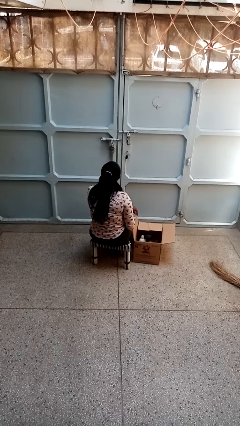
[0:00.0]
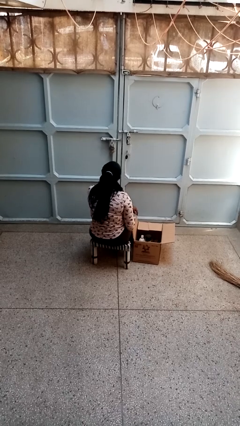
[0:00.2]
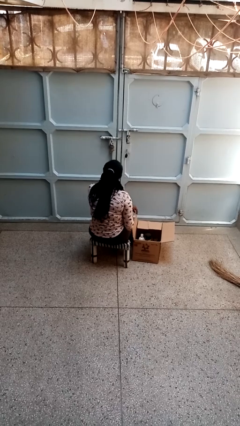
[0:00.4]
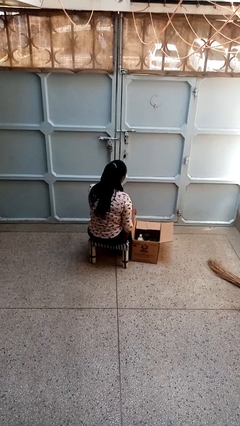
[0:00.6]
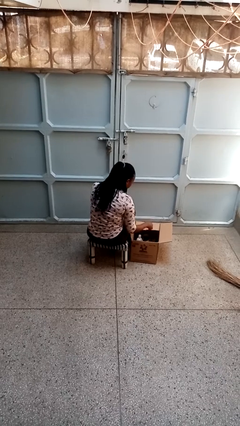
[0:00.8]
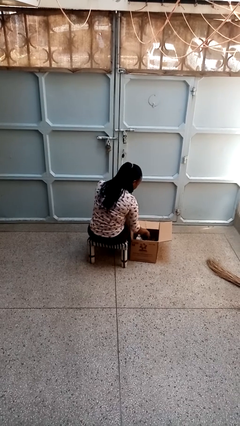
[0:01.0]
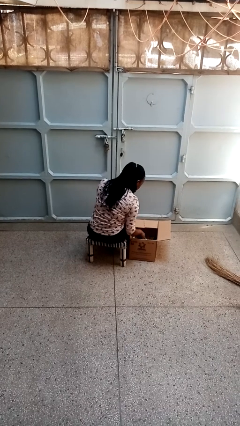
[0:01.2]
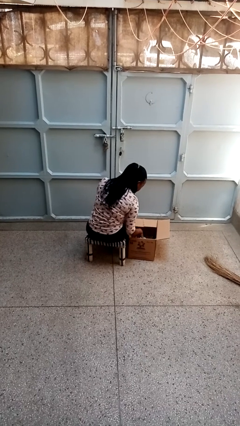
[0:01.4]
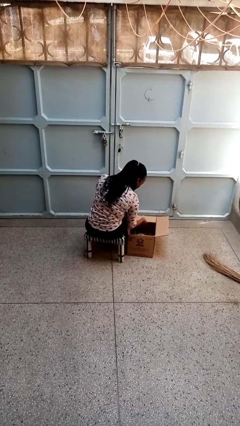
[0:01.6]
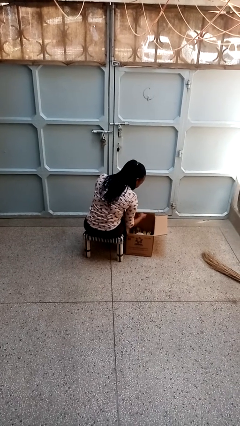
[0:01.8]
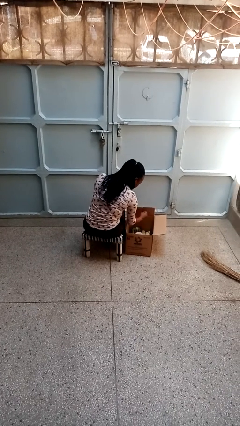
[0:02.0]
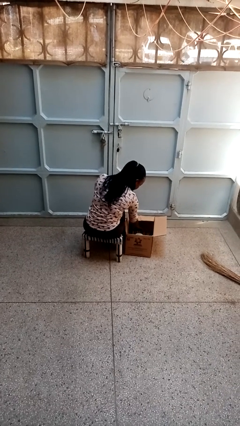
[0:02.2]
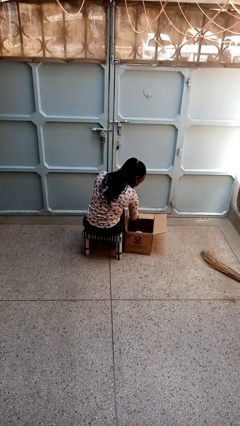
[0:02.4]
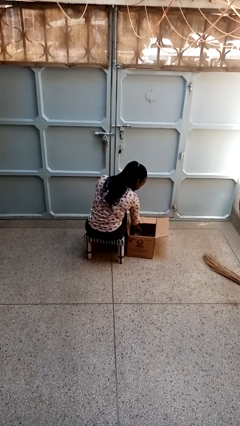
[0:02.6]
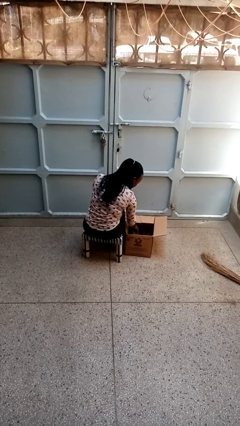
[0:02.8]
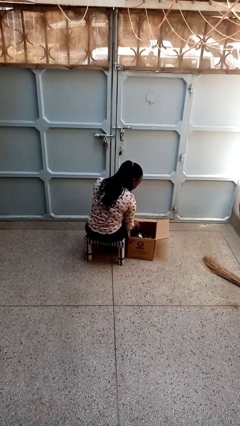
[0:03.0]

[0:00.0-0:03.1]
person searches in box

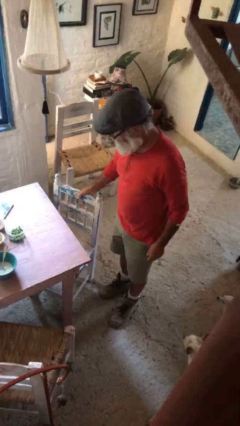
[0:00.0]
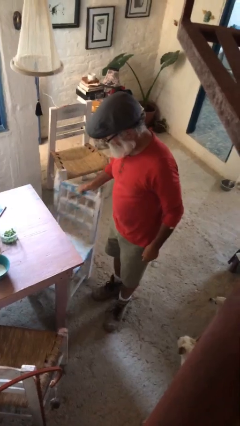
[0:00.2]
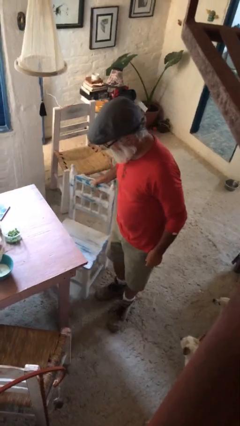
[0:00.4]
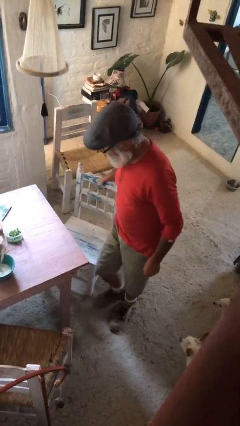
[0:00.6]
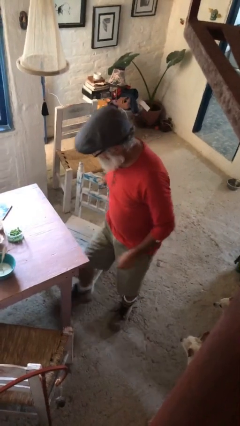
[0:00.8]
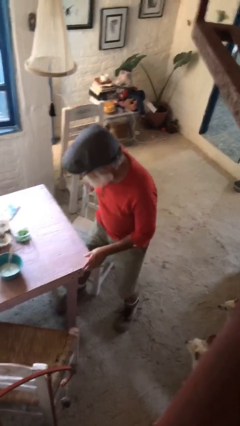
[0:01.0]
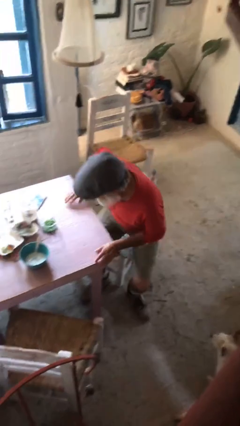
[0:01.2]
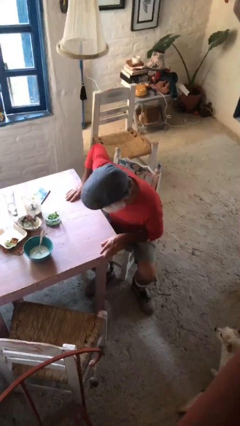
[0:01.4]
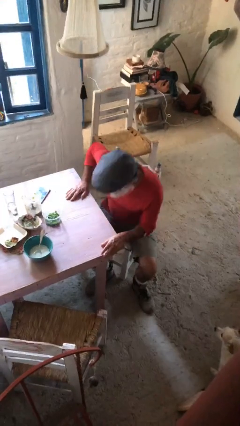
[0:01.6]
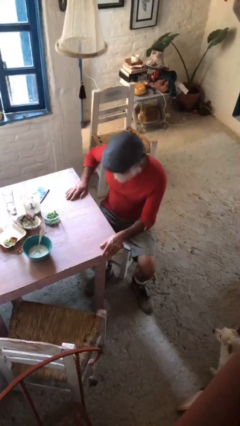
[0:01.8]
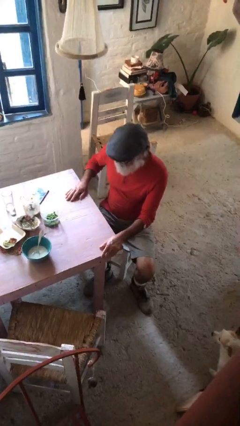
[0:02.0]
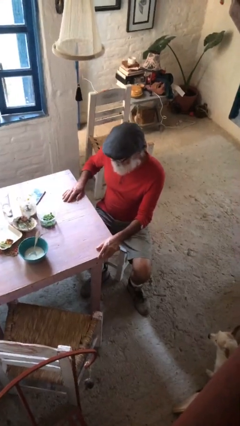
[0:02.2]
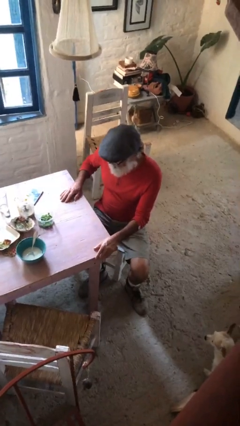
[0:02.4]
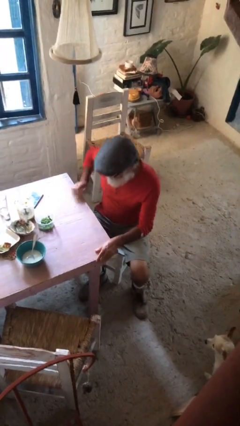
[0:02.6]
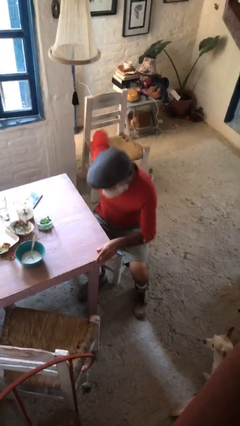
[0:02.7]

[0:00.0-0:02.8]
person sits down

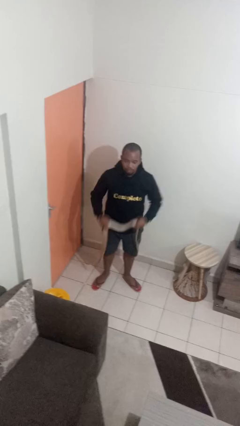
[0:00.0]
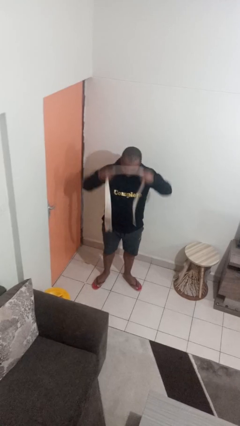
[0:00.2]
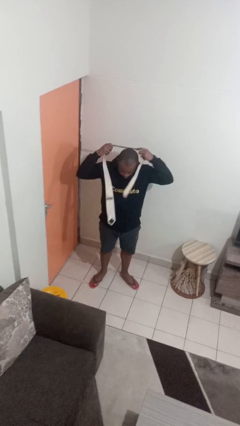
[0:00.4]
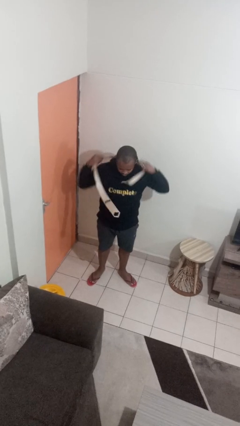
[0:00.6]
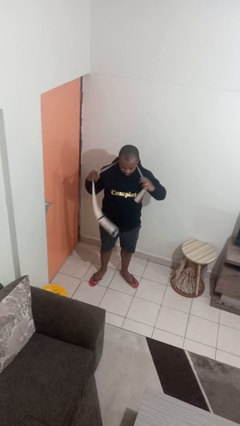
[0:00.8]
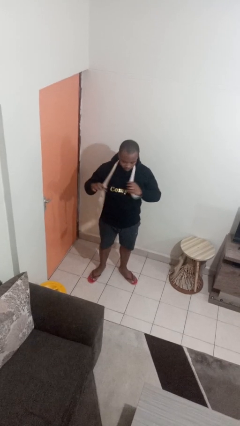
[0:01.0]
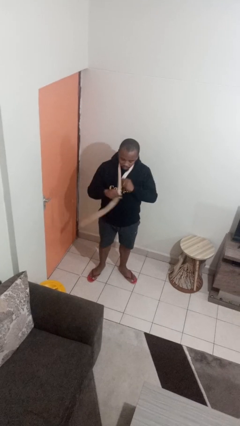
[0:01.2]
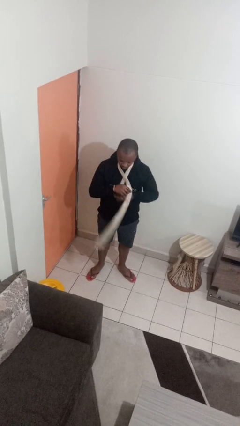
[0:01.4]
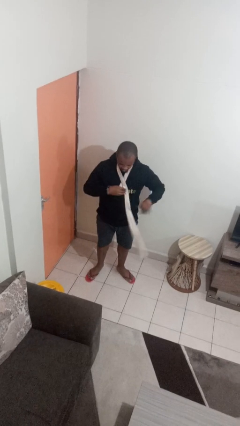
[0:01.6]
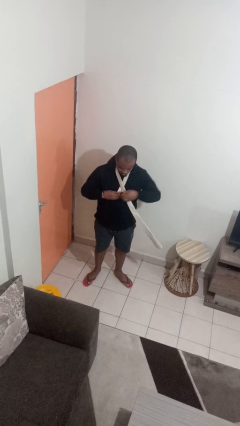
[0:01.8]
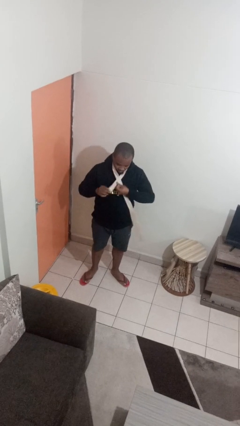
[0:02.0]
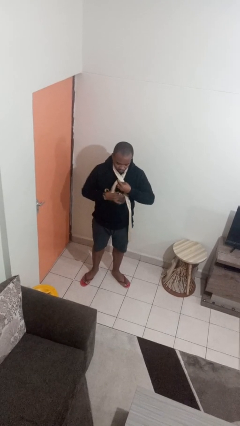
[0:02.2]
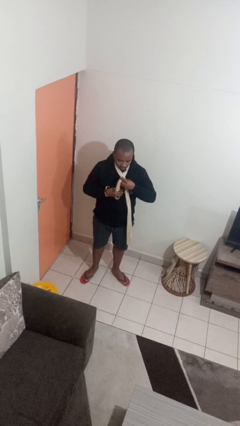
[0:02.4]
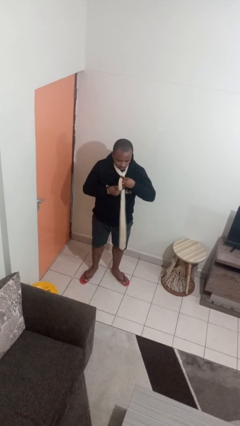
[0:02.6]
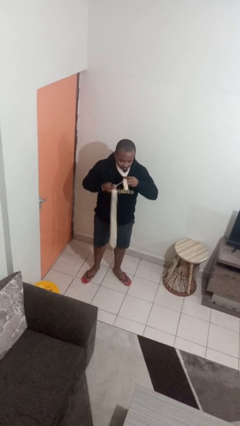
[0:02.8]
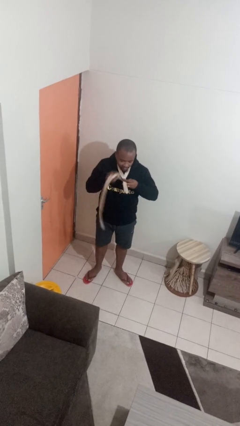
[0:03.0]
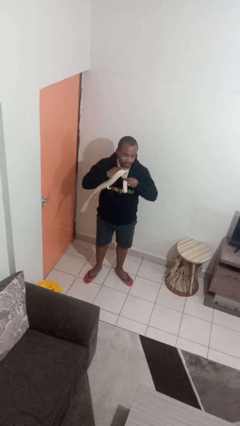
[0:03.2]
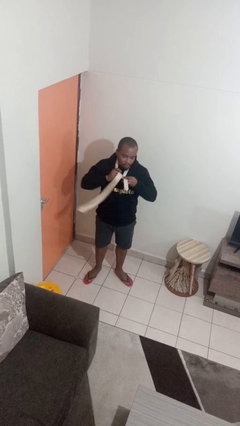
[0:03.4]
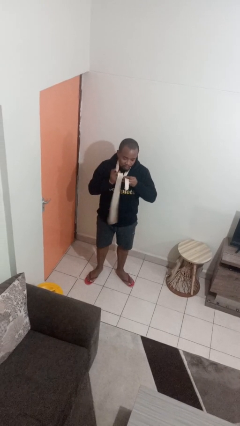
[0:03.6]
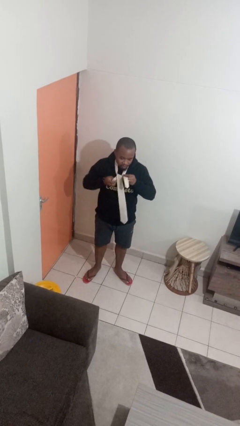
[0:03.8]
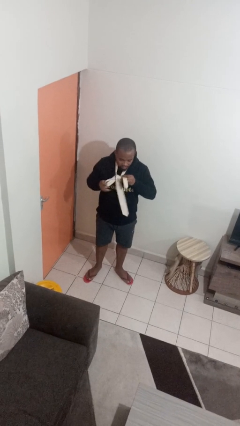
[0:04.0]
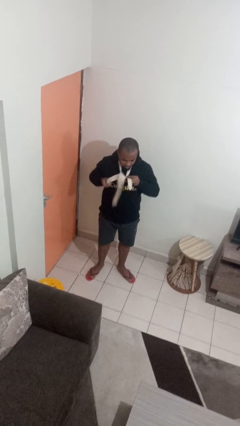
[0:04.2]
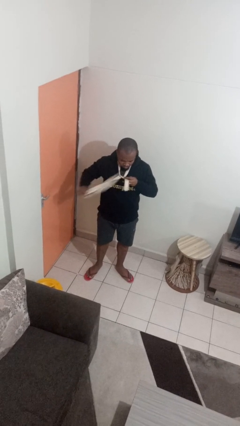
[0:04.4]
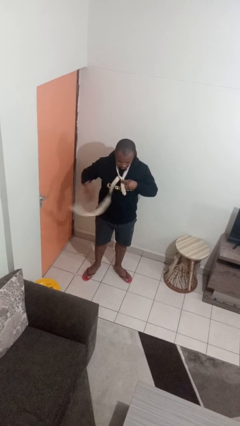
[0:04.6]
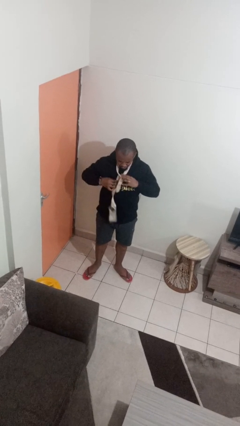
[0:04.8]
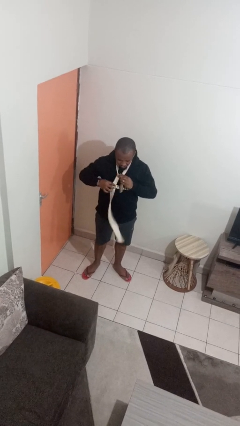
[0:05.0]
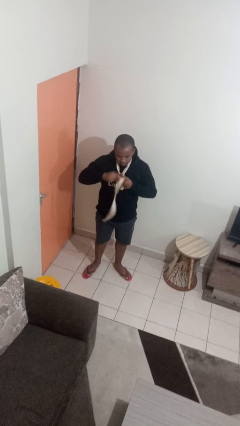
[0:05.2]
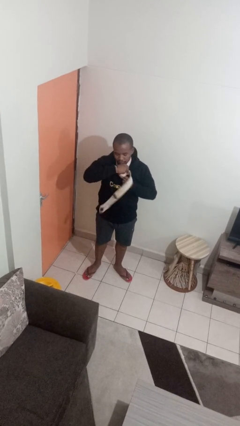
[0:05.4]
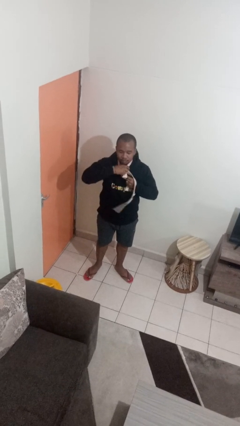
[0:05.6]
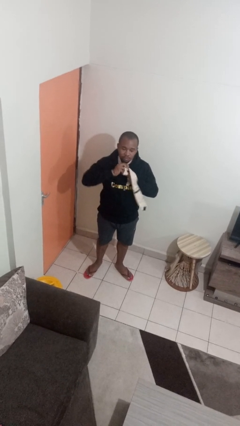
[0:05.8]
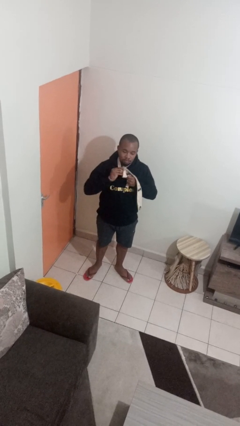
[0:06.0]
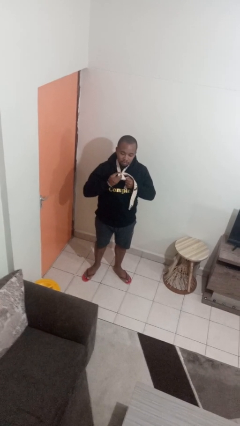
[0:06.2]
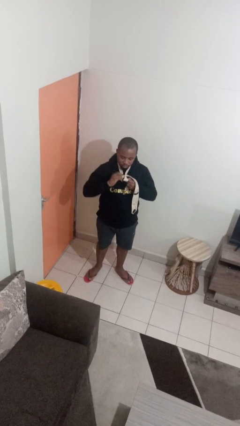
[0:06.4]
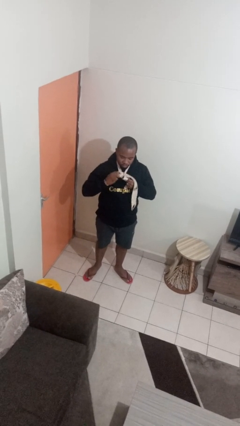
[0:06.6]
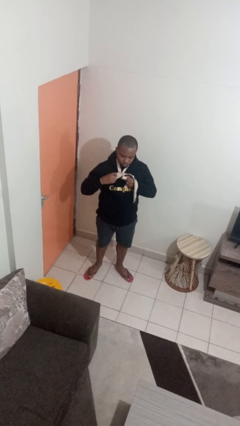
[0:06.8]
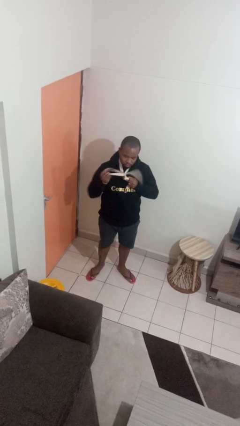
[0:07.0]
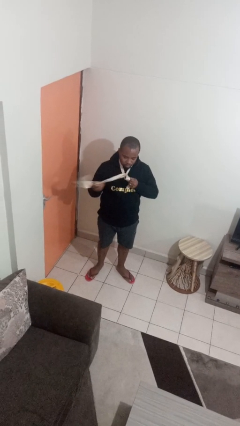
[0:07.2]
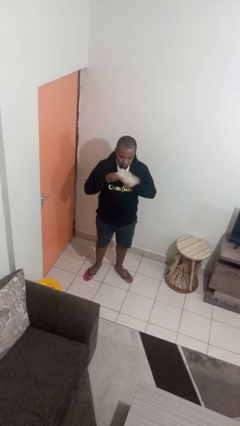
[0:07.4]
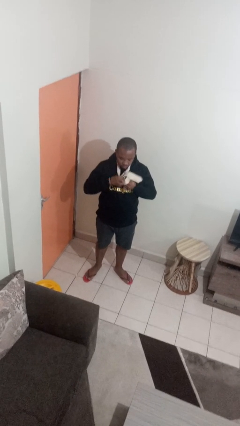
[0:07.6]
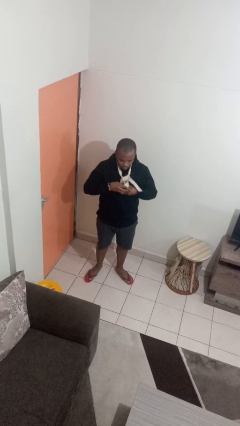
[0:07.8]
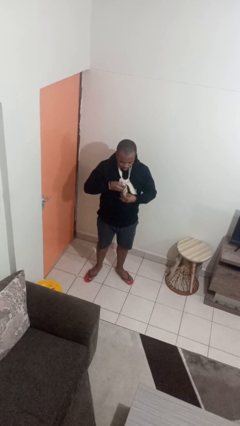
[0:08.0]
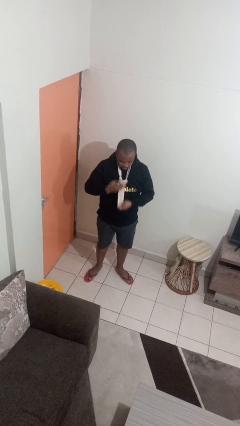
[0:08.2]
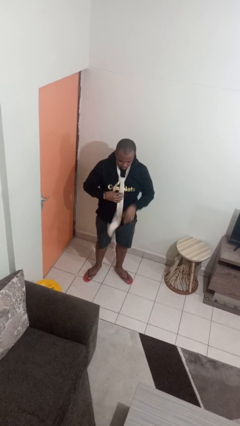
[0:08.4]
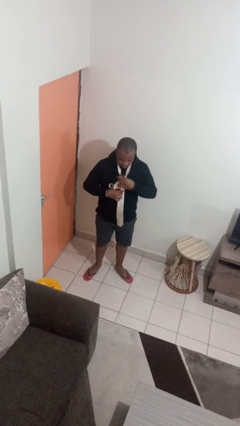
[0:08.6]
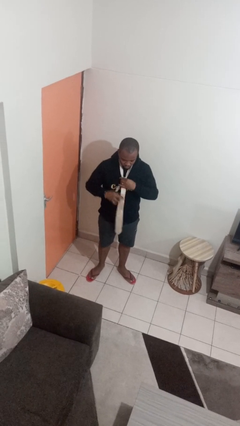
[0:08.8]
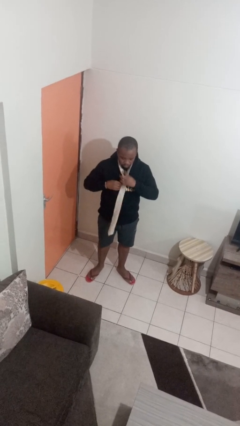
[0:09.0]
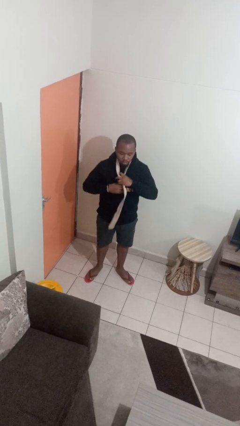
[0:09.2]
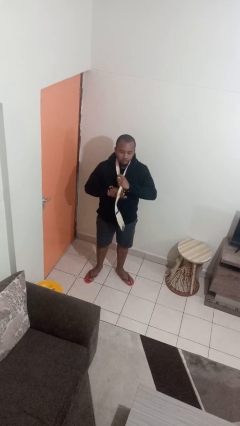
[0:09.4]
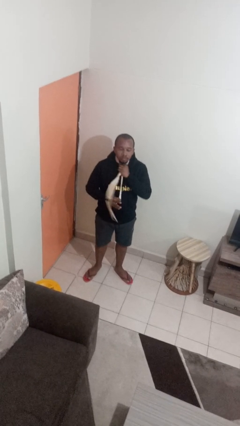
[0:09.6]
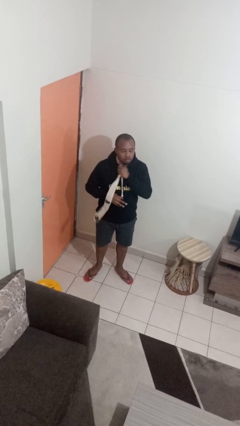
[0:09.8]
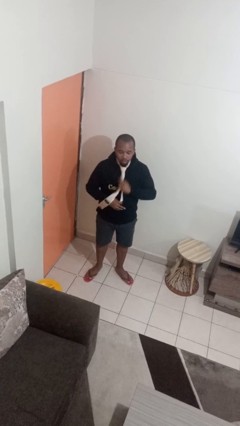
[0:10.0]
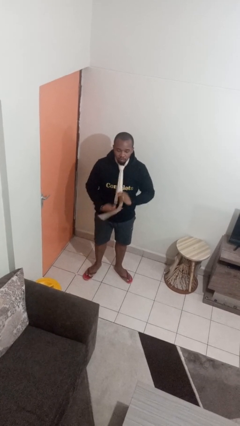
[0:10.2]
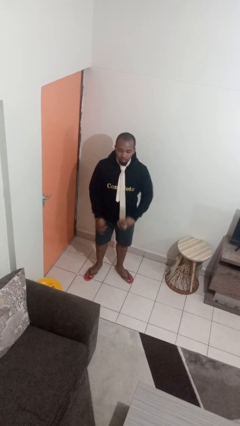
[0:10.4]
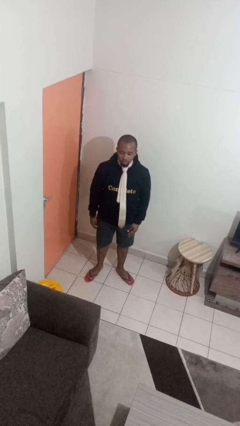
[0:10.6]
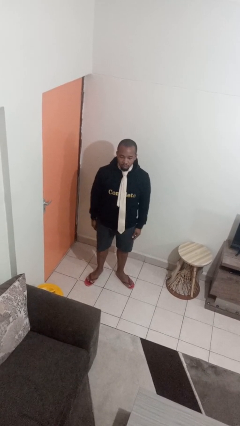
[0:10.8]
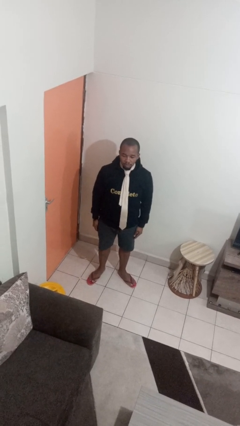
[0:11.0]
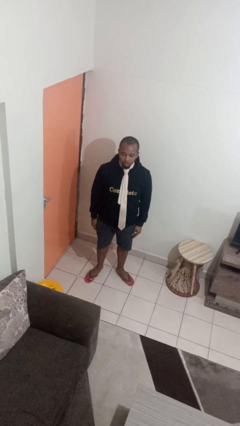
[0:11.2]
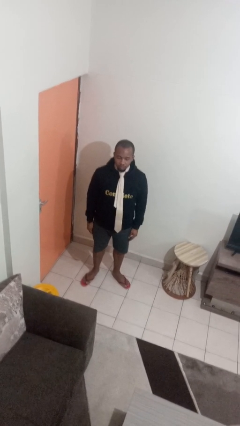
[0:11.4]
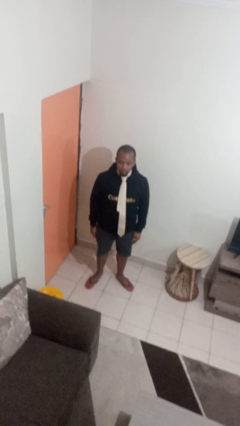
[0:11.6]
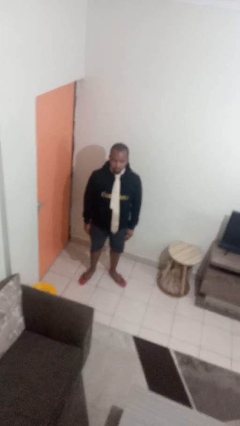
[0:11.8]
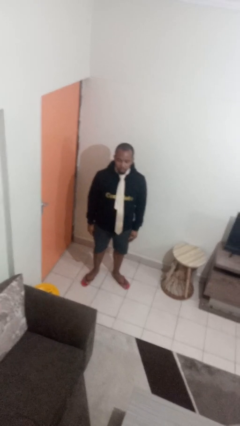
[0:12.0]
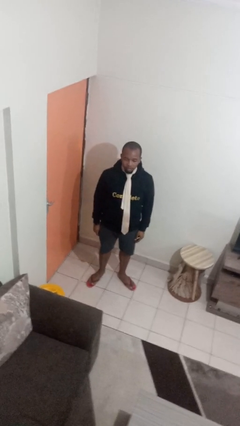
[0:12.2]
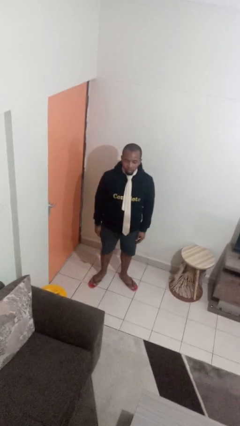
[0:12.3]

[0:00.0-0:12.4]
person puts on necktie
